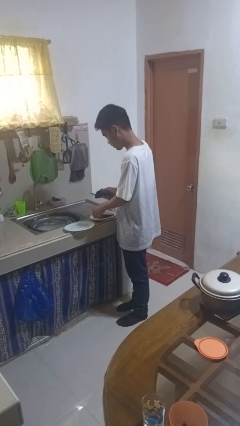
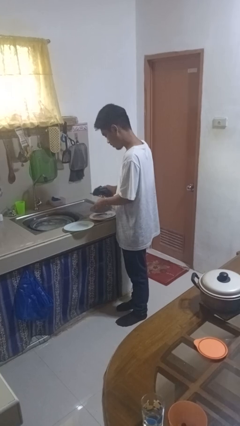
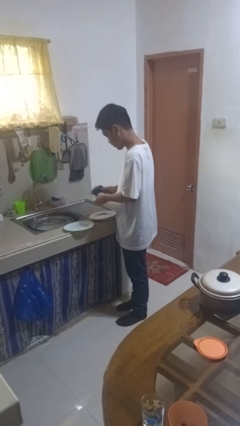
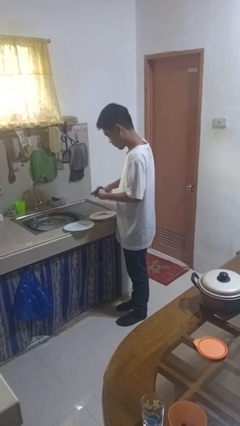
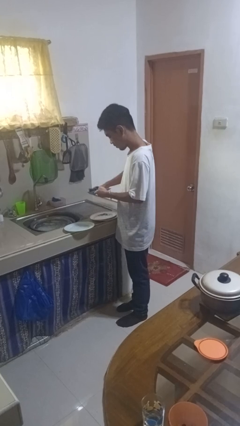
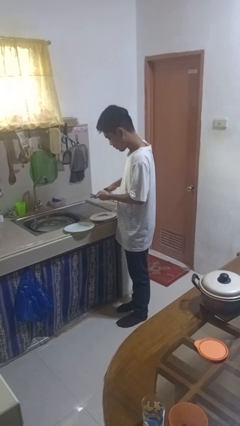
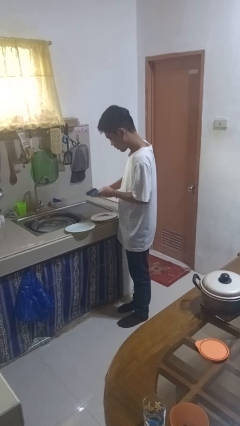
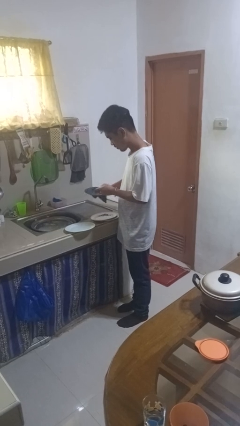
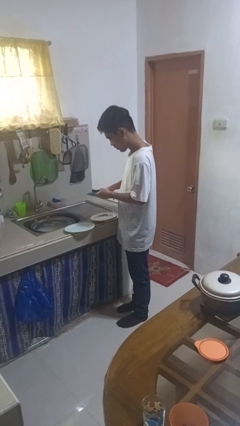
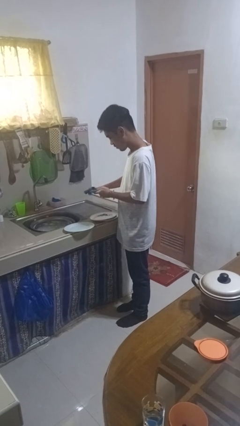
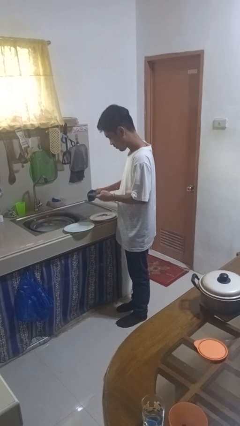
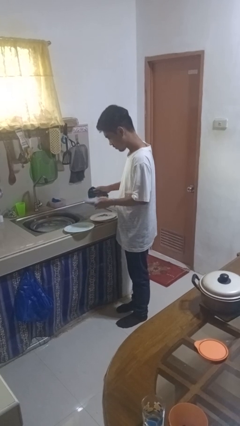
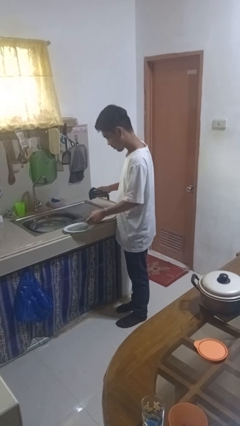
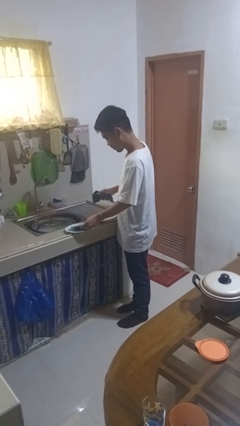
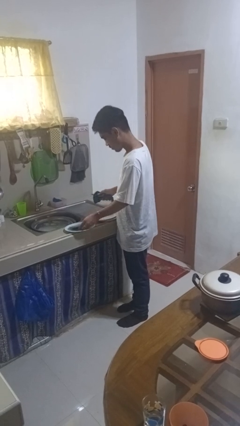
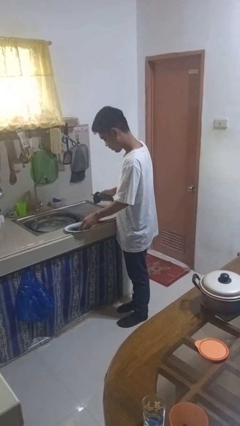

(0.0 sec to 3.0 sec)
person dries dish

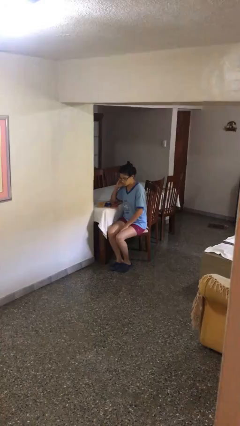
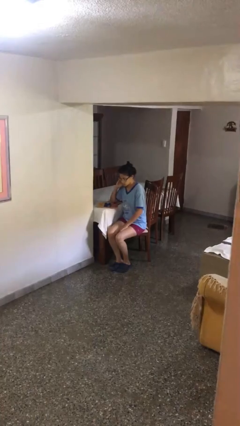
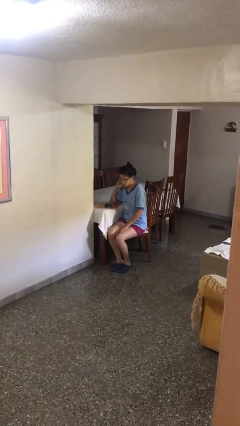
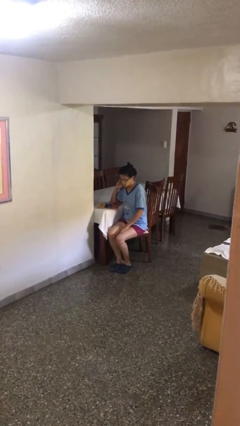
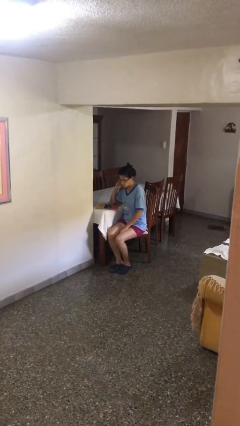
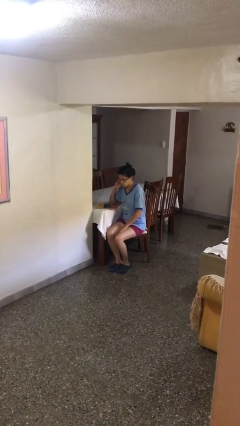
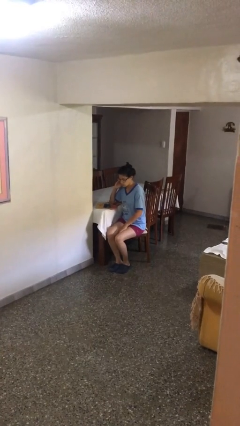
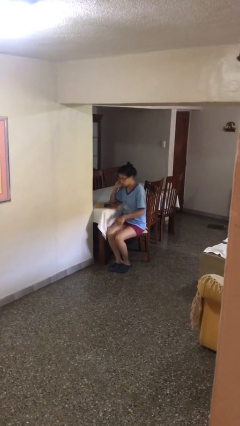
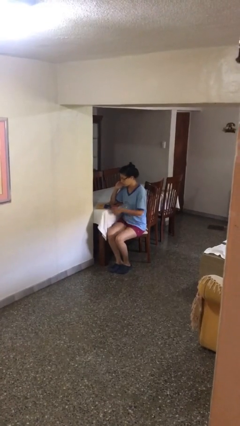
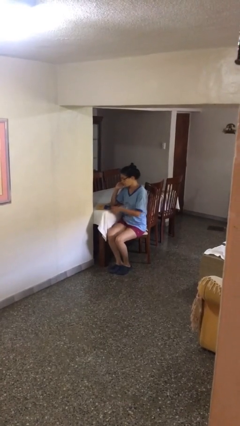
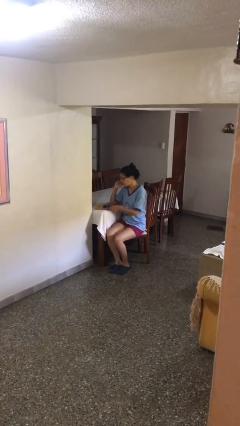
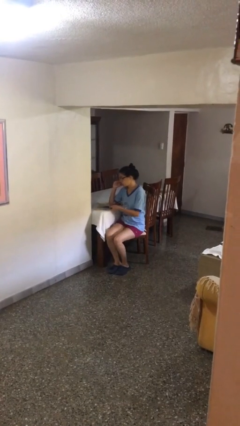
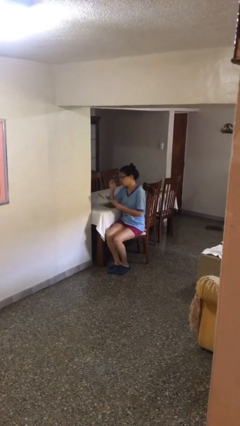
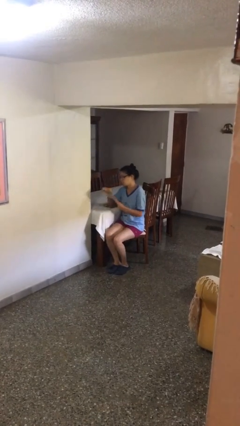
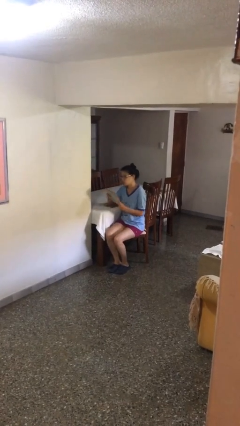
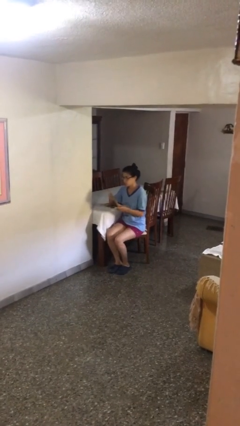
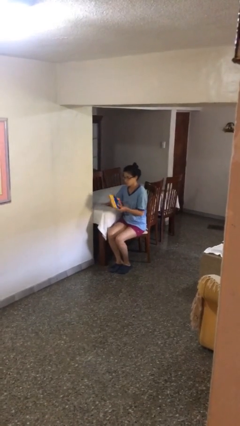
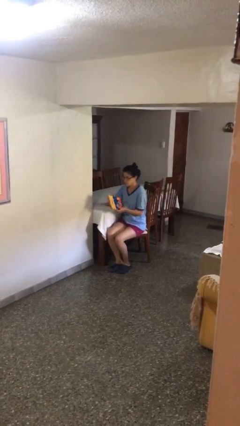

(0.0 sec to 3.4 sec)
person picks up object from table

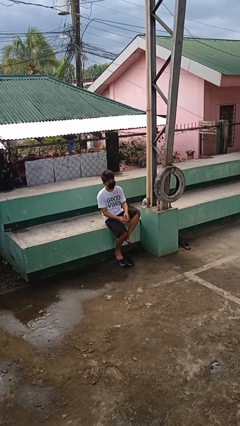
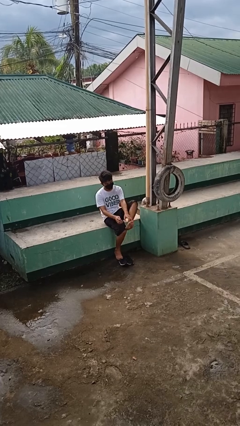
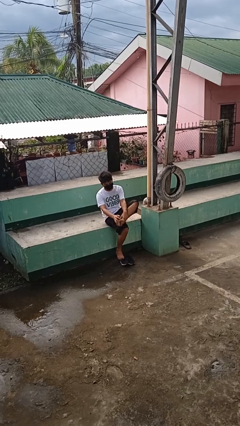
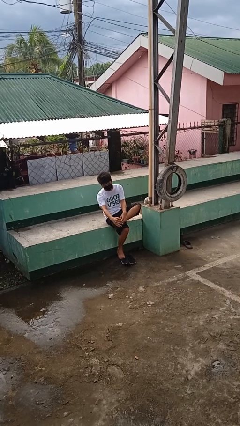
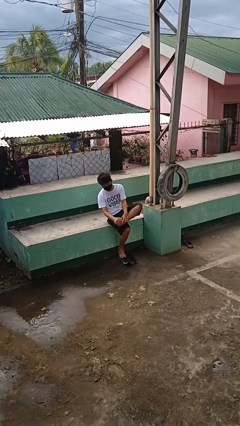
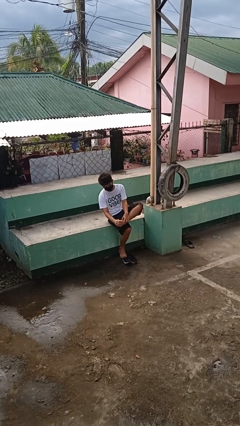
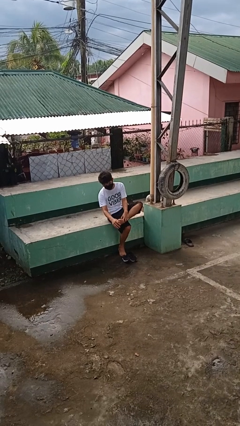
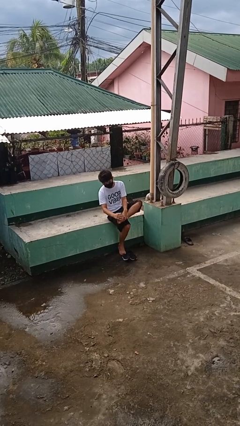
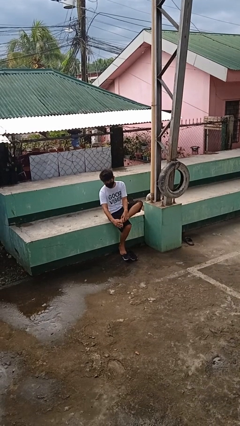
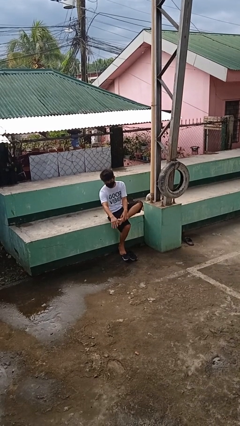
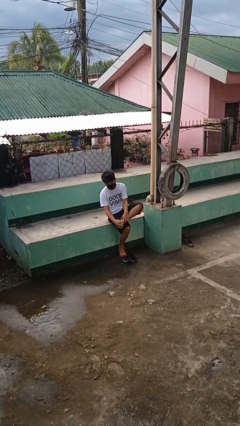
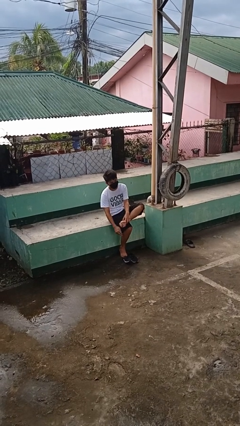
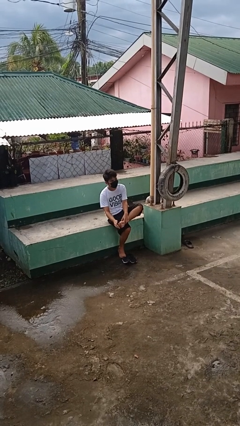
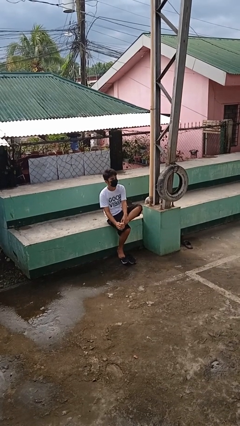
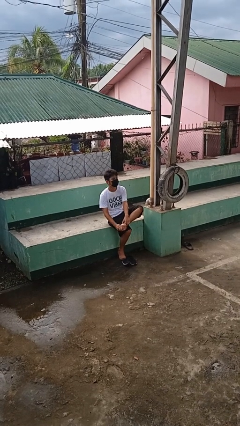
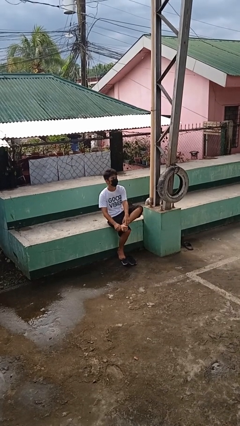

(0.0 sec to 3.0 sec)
person rubs foot

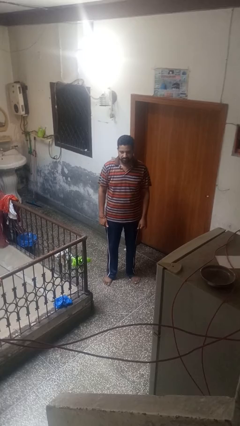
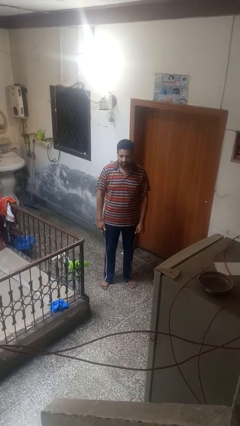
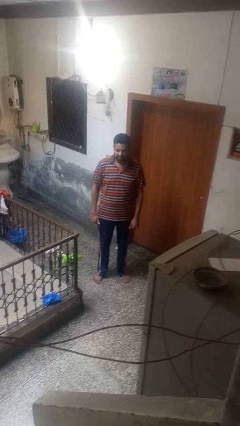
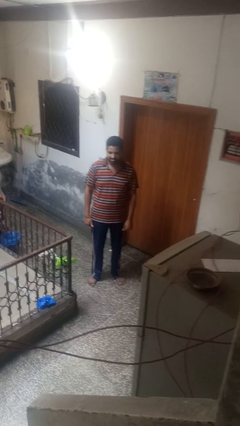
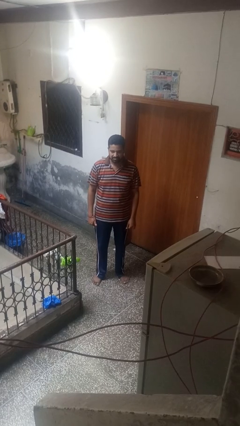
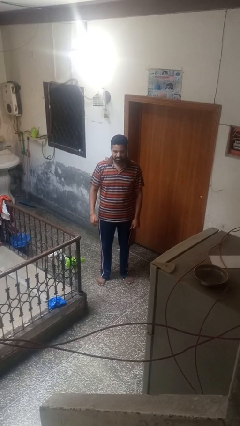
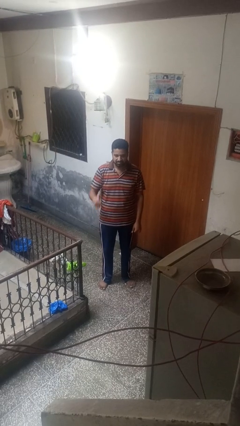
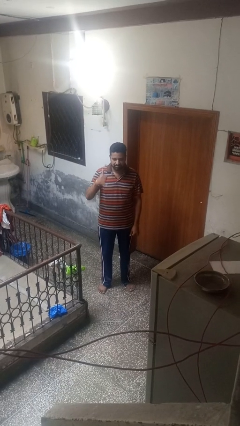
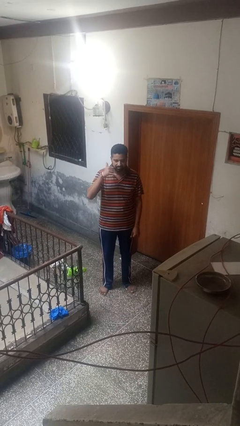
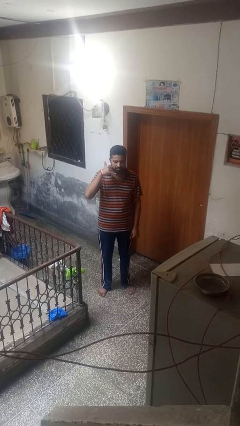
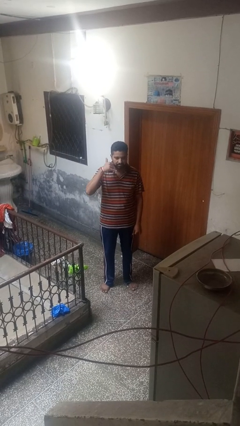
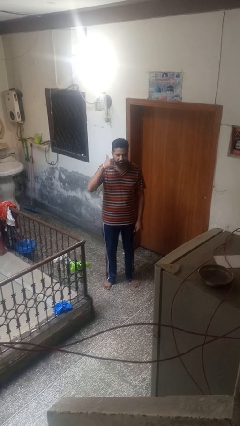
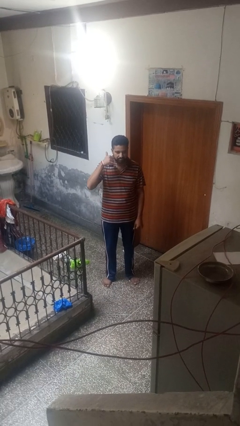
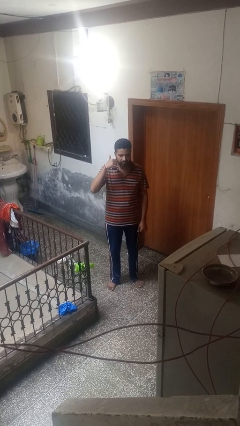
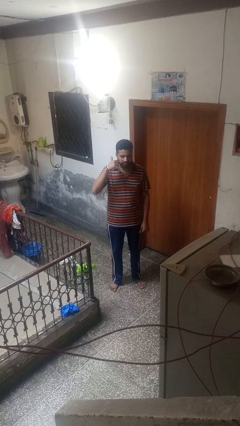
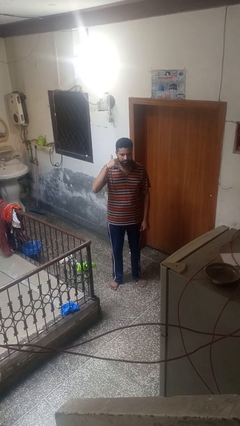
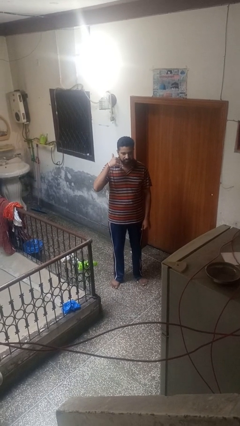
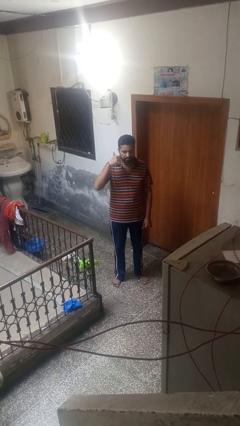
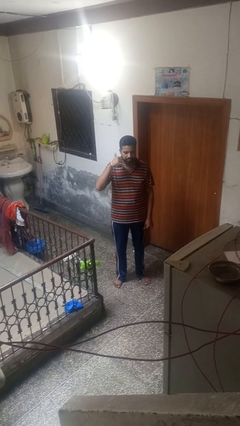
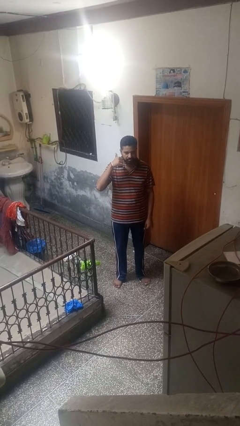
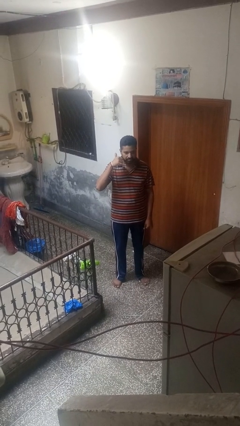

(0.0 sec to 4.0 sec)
person gestures call me

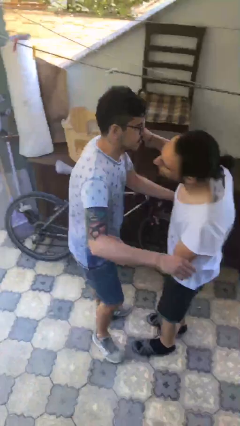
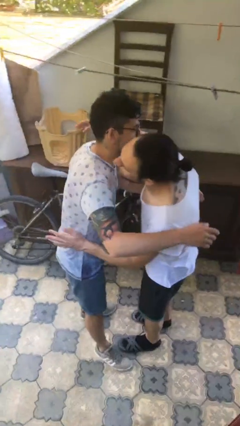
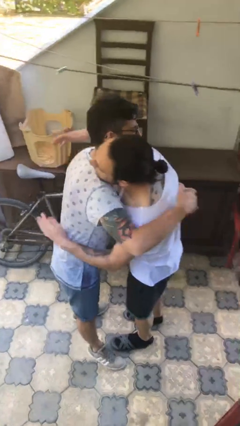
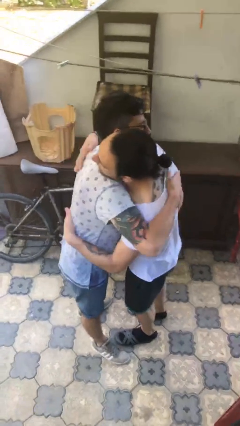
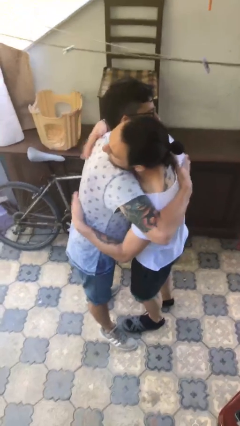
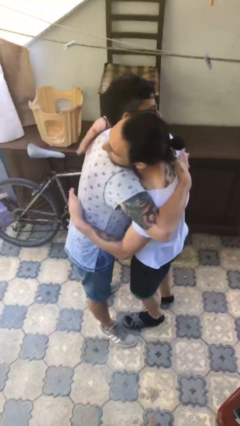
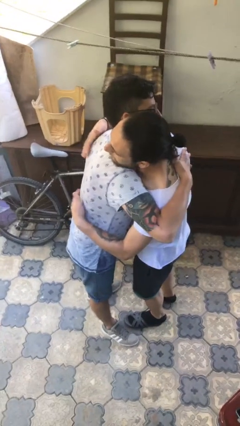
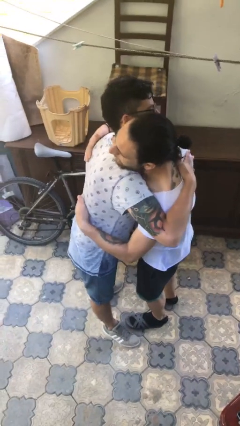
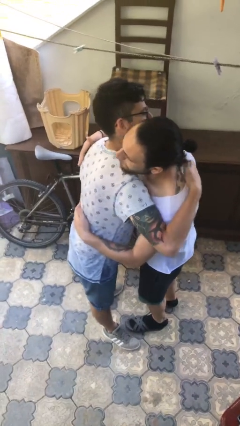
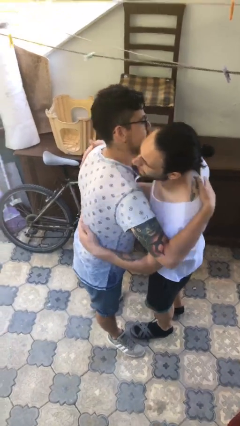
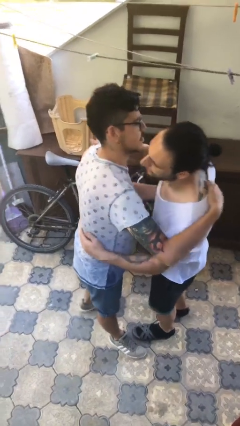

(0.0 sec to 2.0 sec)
person embraces person

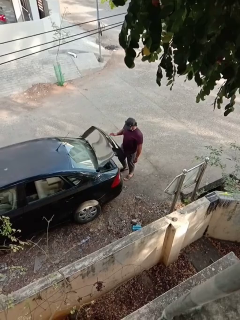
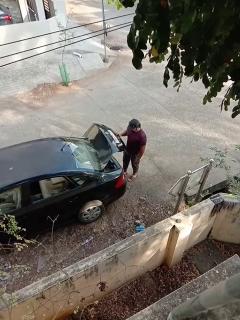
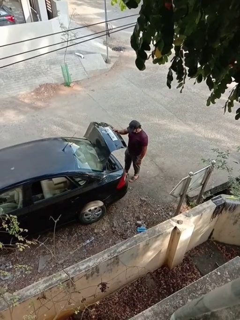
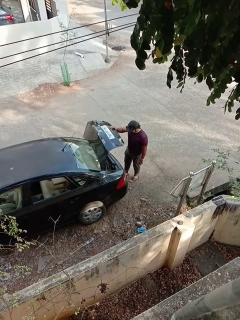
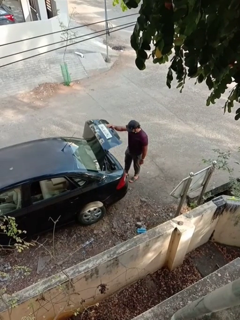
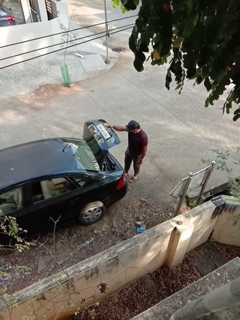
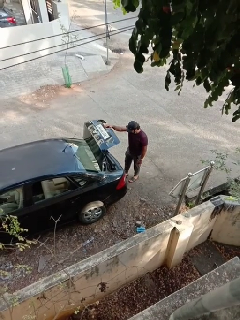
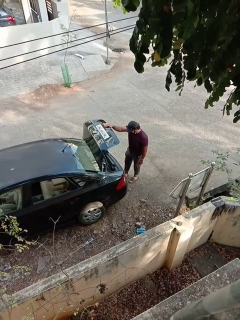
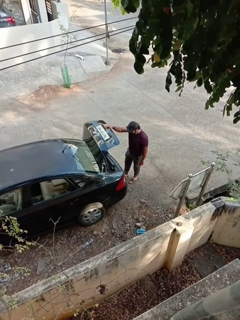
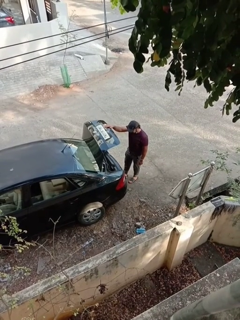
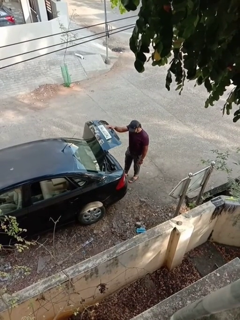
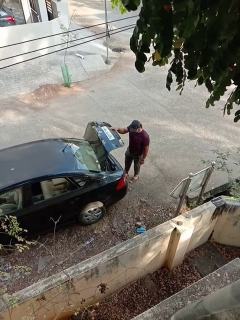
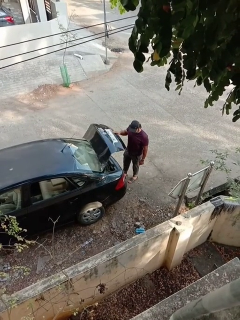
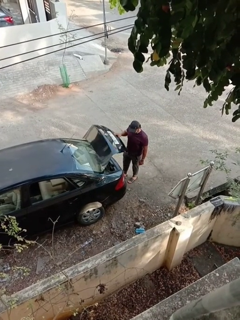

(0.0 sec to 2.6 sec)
person opens car trunk
